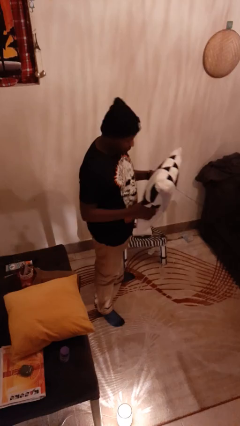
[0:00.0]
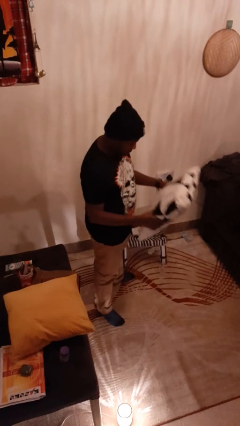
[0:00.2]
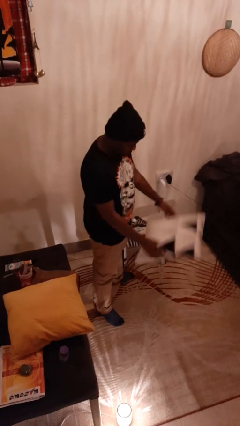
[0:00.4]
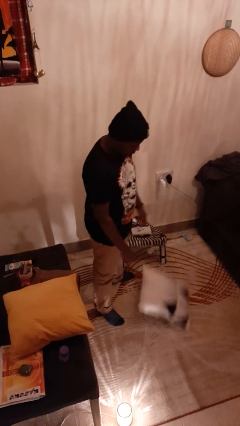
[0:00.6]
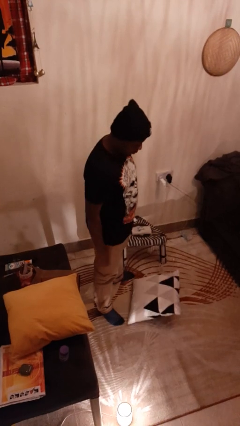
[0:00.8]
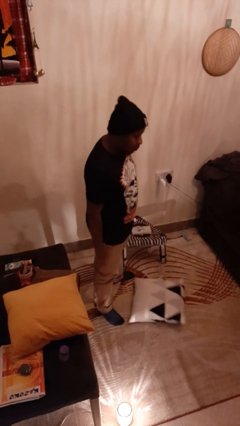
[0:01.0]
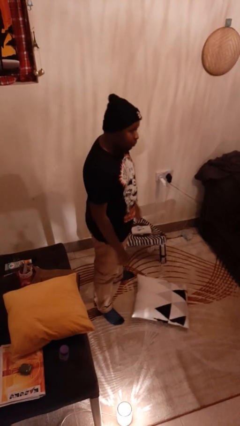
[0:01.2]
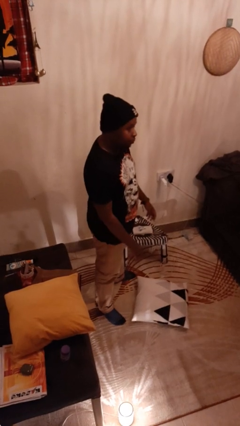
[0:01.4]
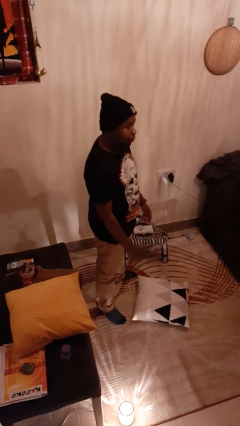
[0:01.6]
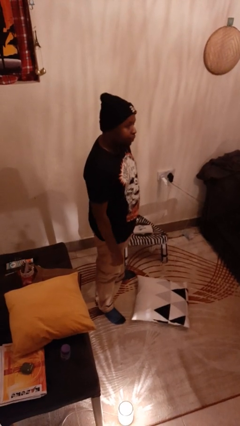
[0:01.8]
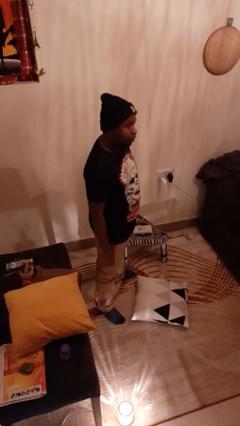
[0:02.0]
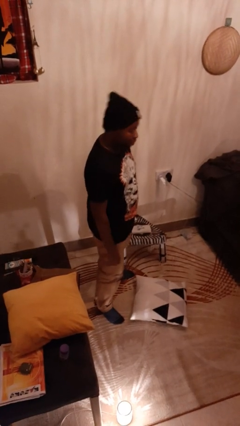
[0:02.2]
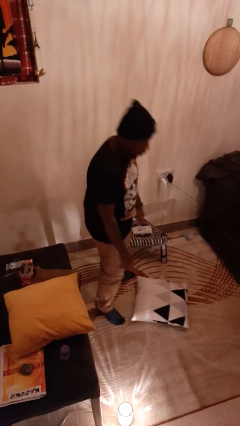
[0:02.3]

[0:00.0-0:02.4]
person drops object

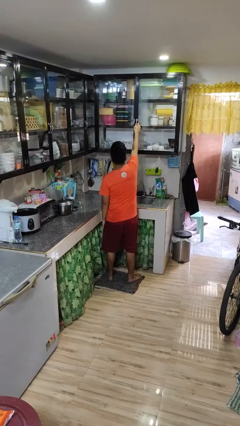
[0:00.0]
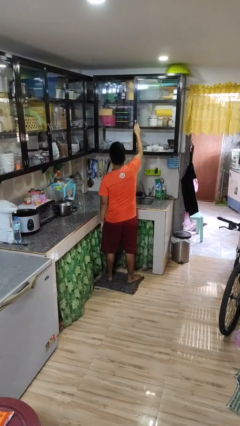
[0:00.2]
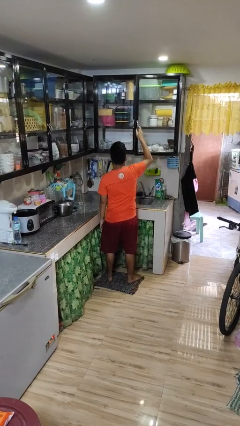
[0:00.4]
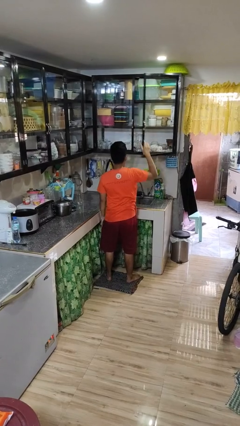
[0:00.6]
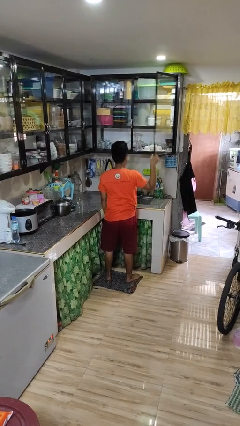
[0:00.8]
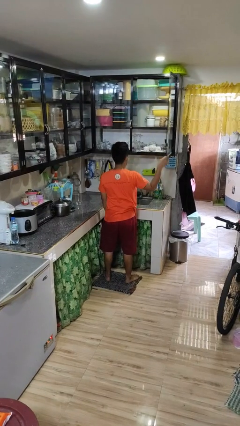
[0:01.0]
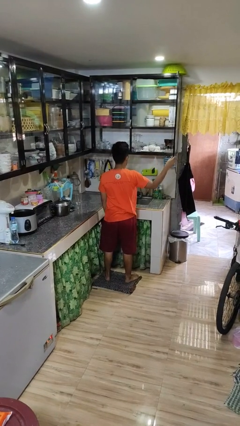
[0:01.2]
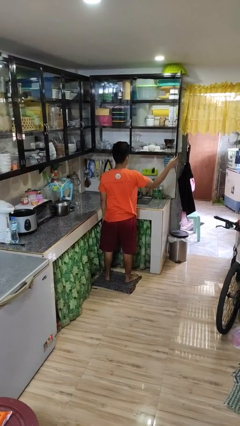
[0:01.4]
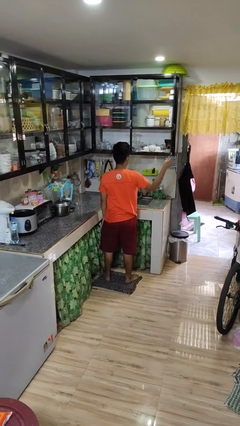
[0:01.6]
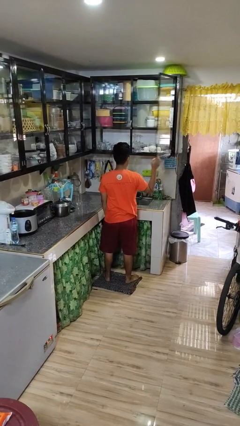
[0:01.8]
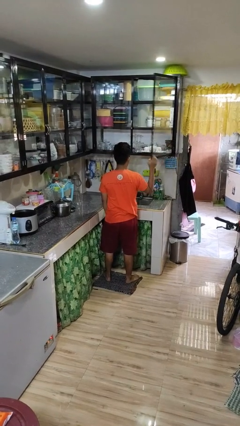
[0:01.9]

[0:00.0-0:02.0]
person opens cabinet

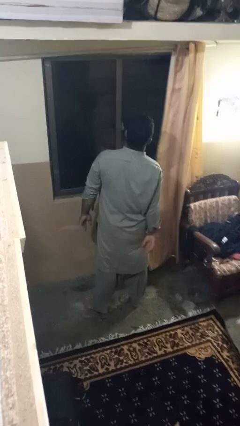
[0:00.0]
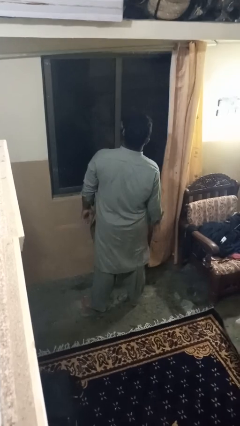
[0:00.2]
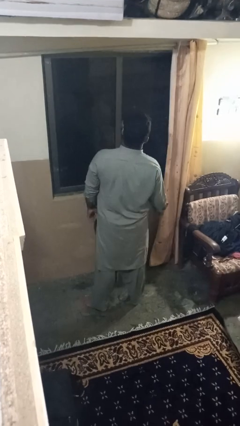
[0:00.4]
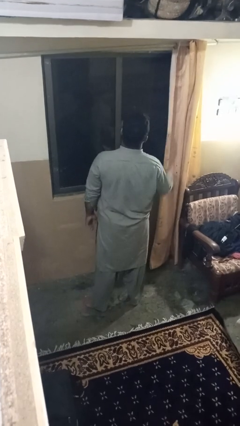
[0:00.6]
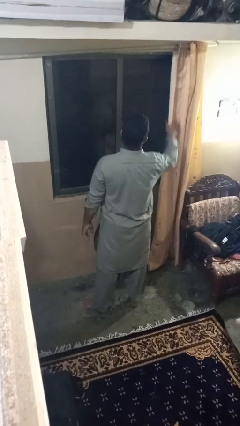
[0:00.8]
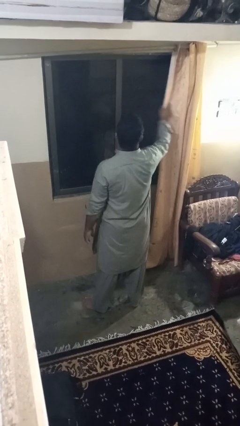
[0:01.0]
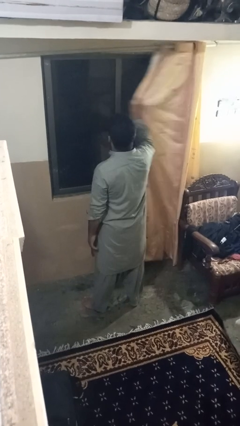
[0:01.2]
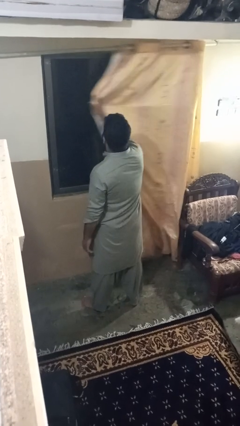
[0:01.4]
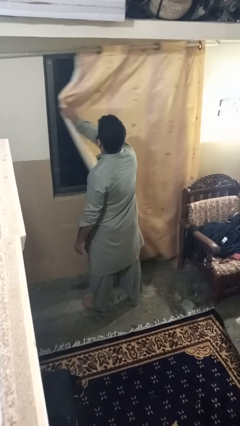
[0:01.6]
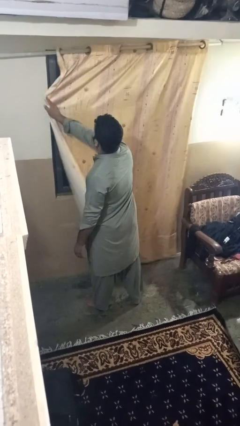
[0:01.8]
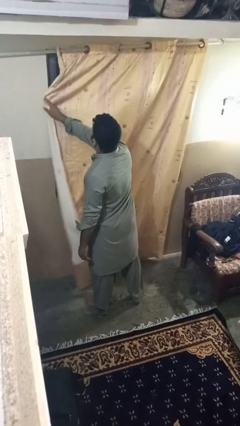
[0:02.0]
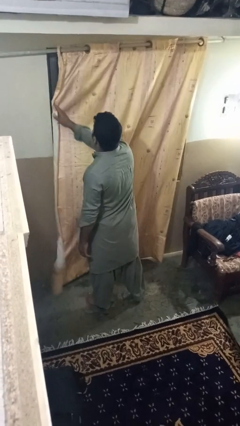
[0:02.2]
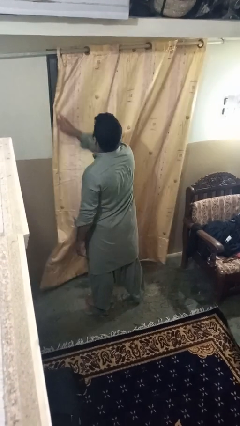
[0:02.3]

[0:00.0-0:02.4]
person closes curtains

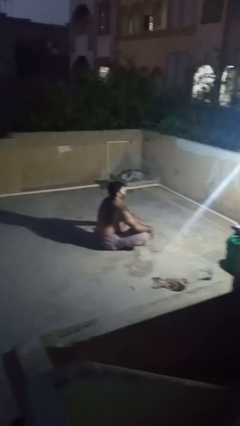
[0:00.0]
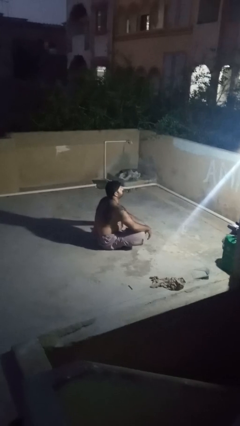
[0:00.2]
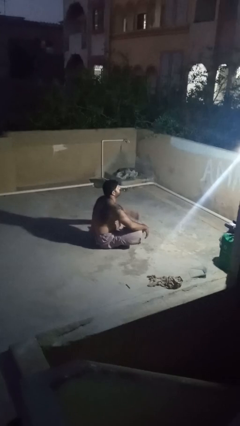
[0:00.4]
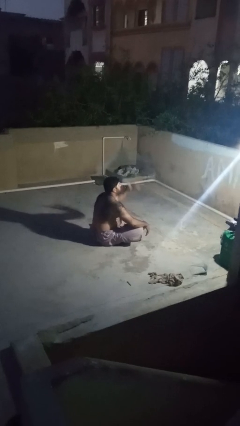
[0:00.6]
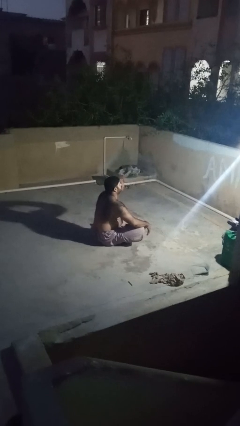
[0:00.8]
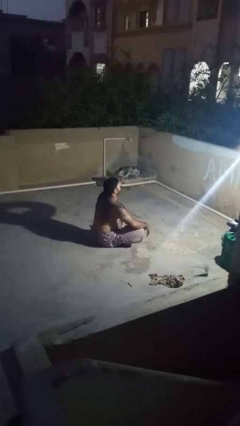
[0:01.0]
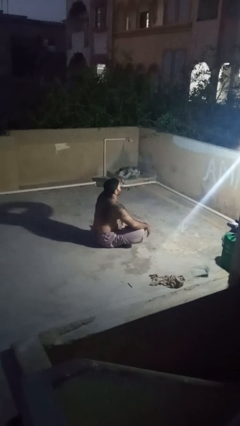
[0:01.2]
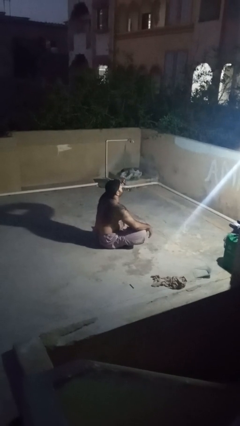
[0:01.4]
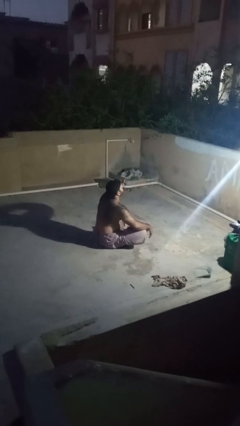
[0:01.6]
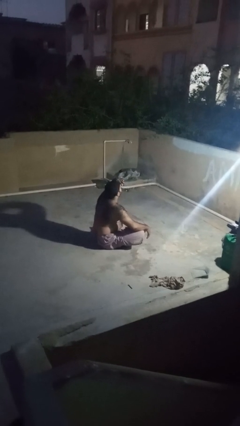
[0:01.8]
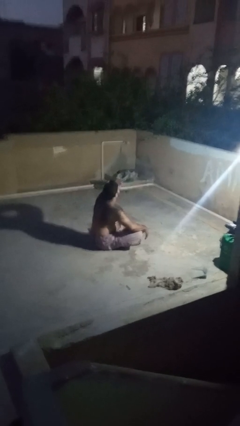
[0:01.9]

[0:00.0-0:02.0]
person shades eyes

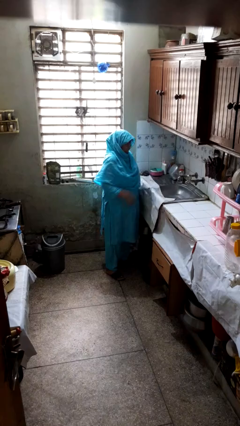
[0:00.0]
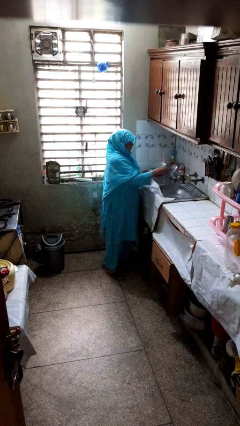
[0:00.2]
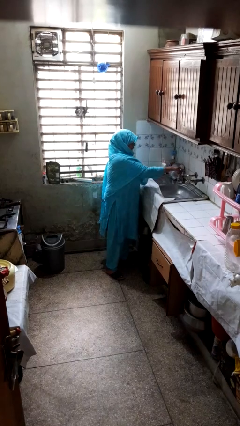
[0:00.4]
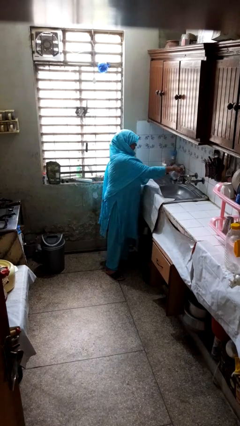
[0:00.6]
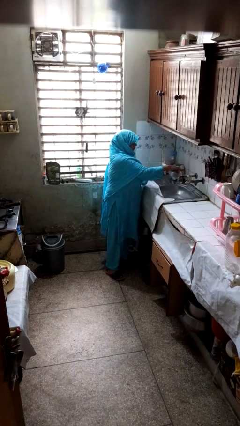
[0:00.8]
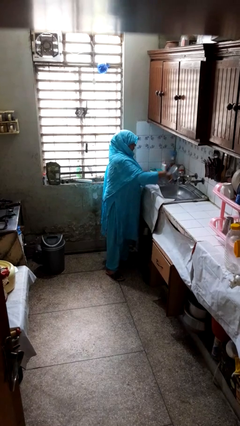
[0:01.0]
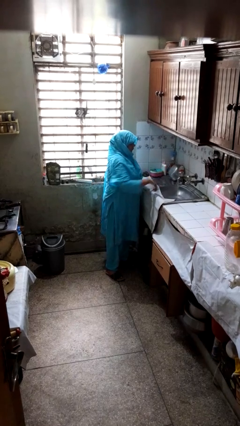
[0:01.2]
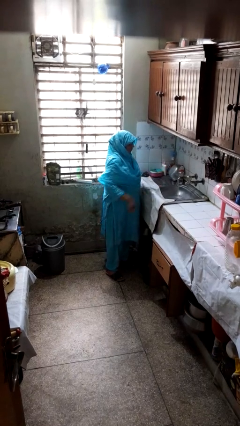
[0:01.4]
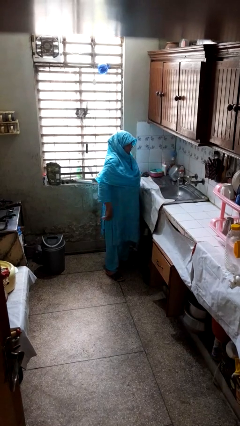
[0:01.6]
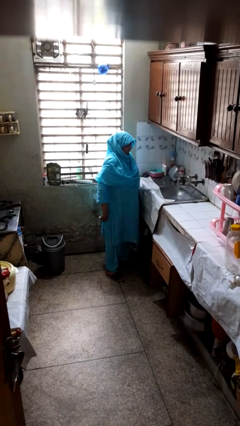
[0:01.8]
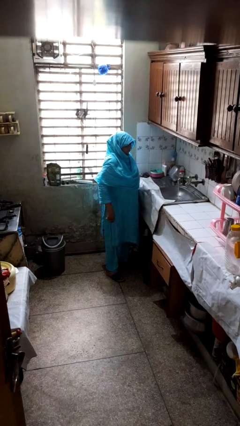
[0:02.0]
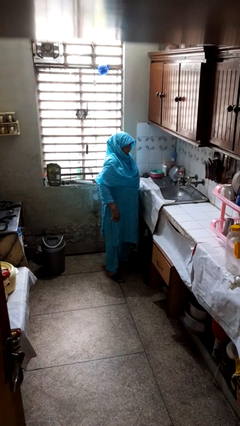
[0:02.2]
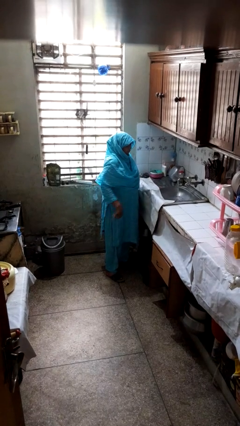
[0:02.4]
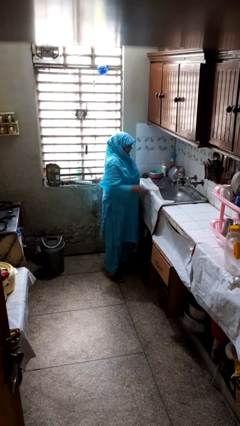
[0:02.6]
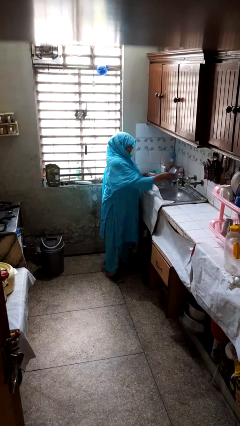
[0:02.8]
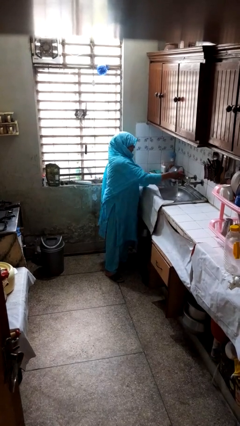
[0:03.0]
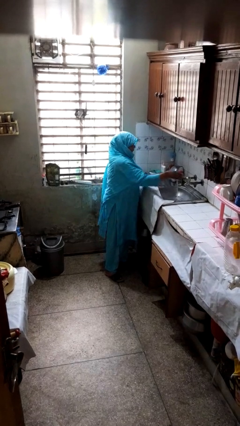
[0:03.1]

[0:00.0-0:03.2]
person turns on faucet

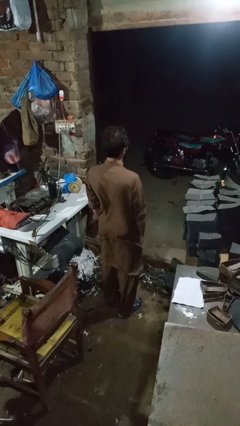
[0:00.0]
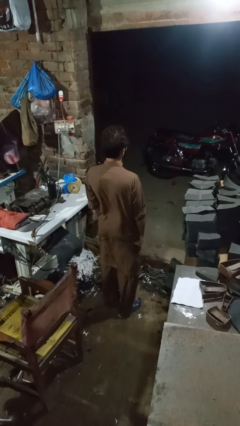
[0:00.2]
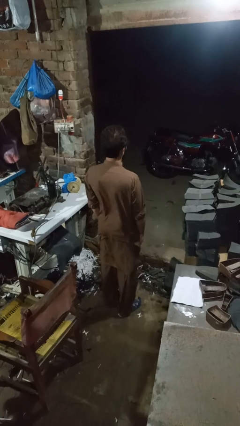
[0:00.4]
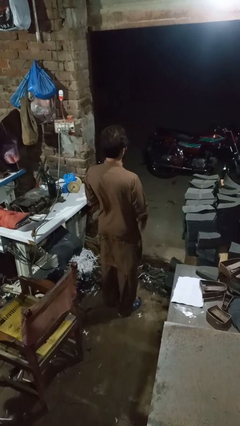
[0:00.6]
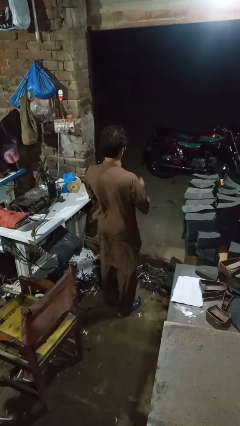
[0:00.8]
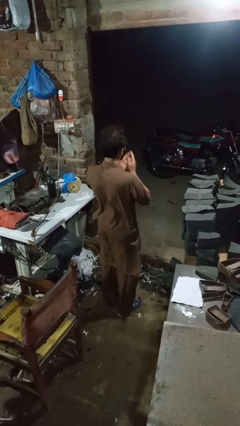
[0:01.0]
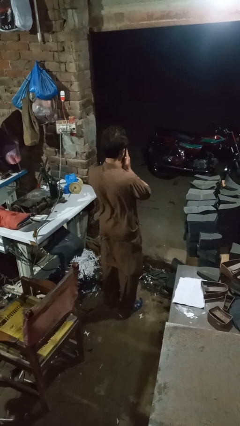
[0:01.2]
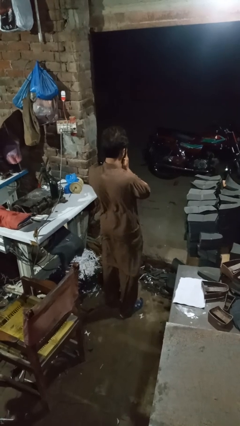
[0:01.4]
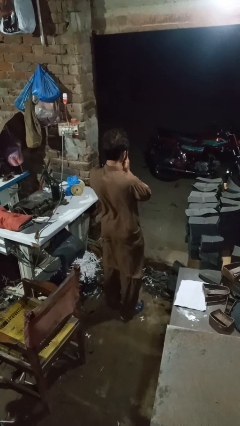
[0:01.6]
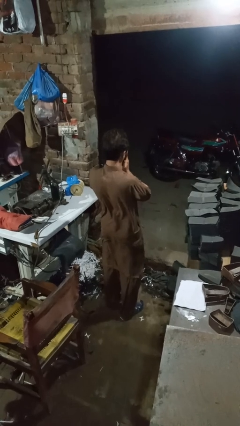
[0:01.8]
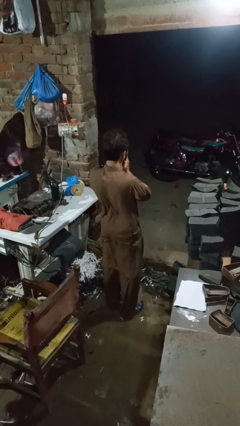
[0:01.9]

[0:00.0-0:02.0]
person sneezes into hand

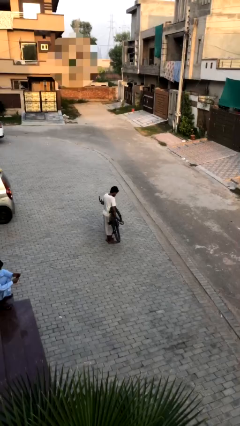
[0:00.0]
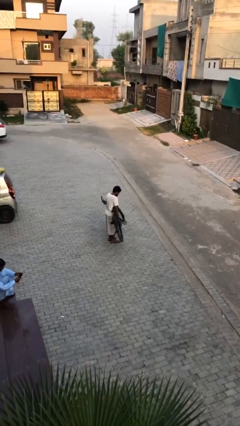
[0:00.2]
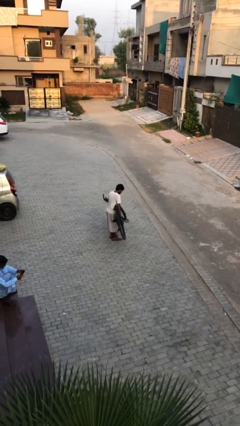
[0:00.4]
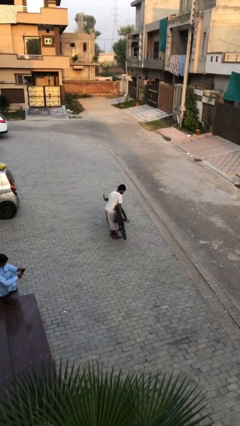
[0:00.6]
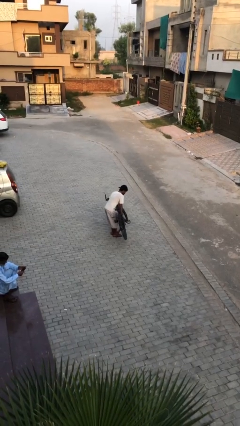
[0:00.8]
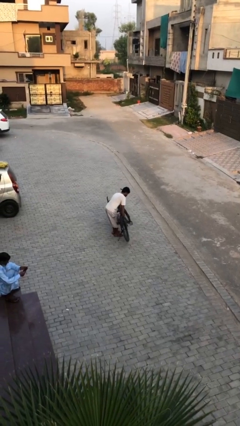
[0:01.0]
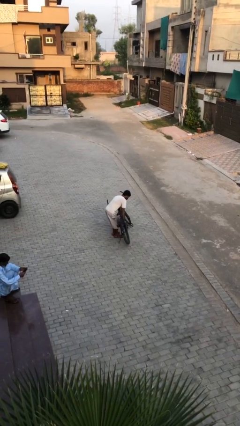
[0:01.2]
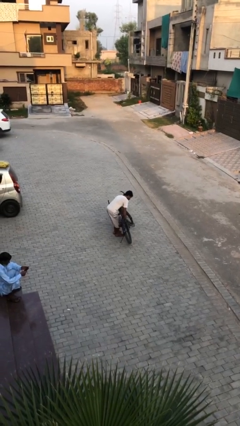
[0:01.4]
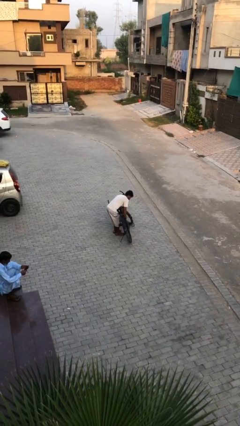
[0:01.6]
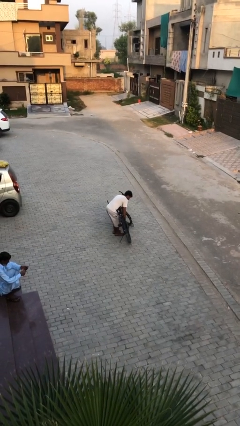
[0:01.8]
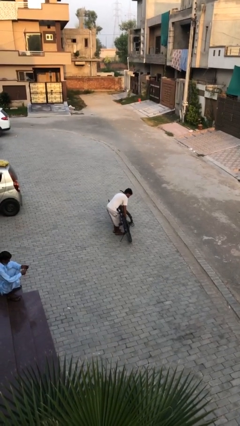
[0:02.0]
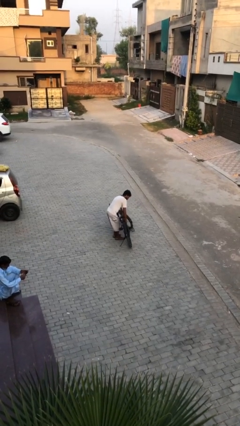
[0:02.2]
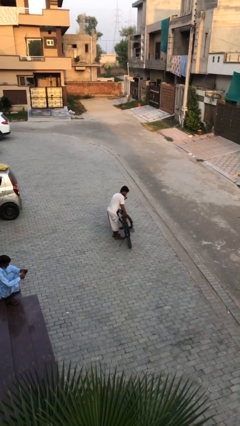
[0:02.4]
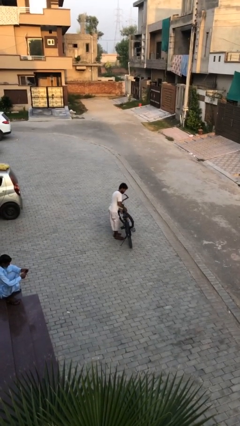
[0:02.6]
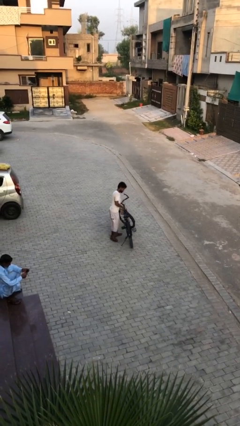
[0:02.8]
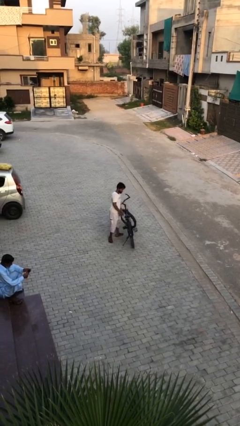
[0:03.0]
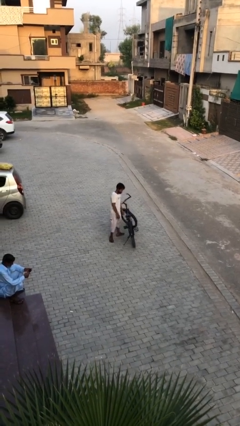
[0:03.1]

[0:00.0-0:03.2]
person puts down object on floor
